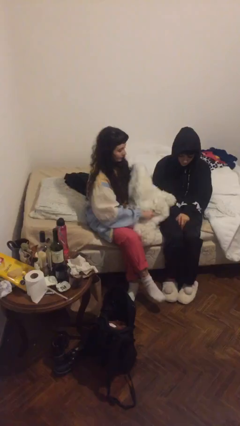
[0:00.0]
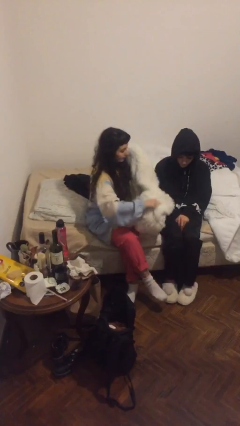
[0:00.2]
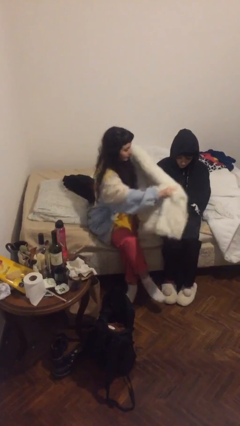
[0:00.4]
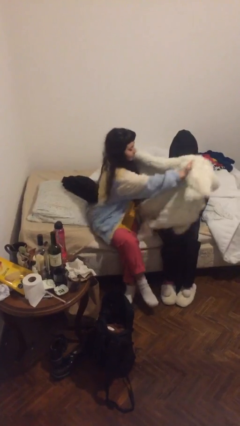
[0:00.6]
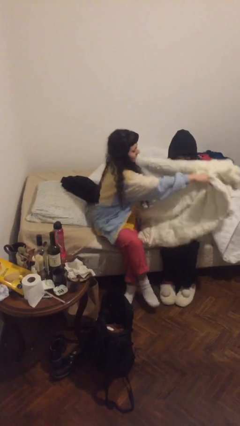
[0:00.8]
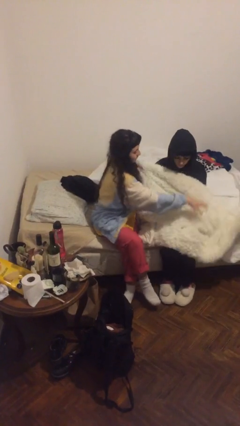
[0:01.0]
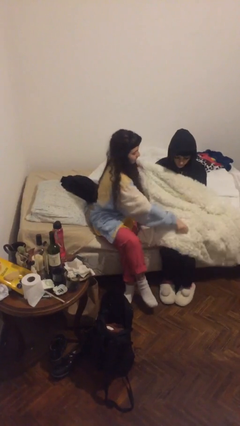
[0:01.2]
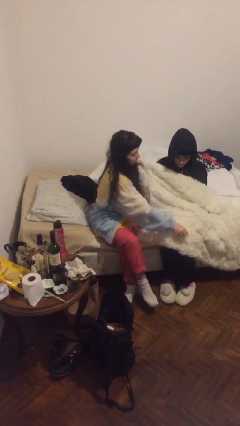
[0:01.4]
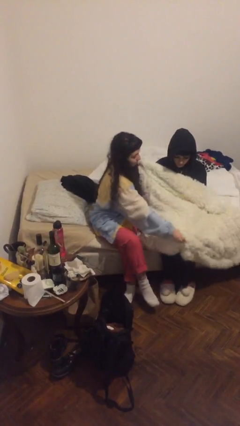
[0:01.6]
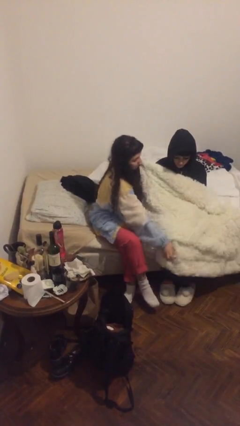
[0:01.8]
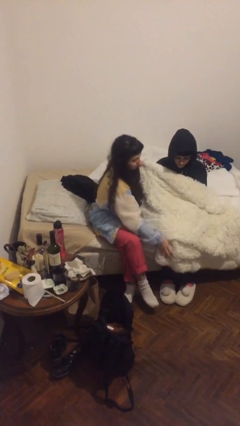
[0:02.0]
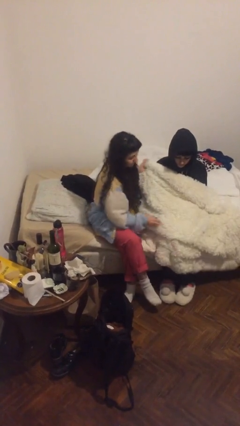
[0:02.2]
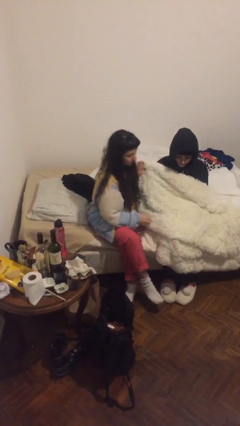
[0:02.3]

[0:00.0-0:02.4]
person covers friend with blanket

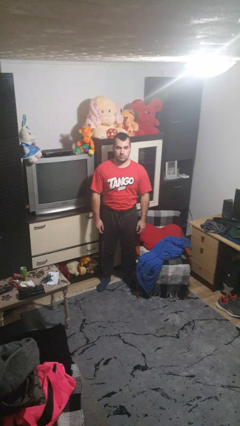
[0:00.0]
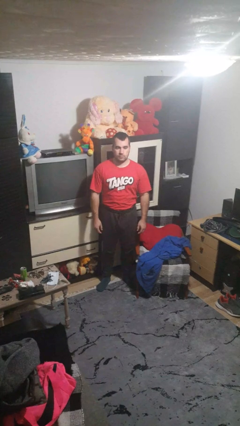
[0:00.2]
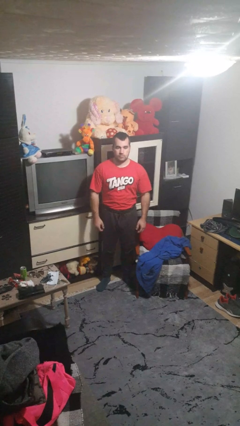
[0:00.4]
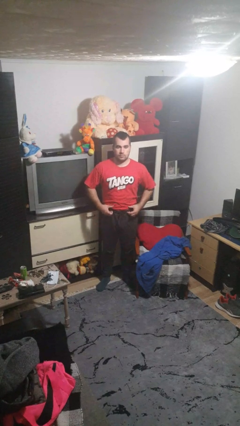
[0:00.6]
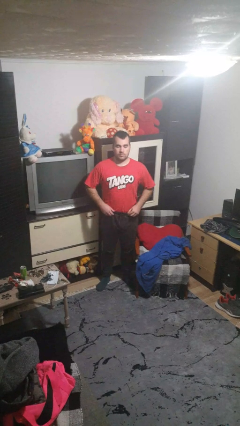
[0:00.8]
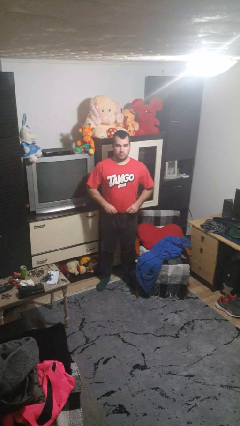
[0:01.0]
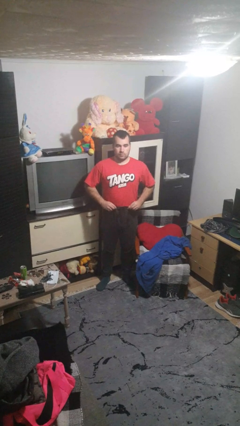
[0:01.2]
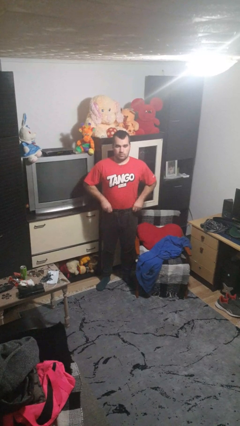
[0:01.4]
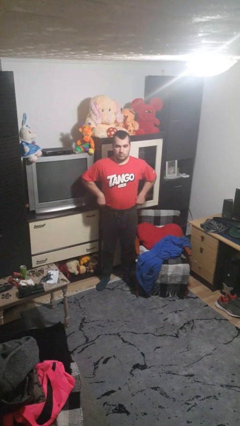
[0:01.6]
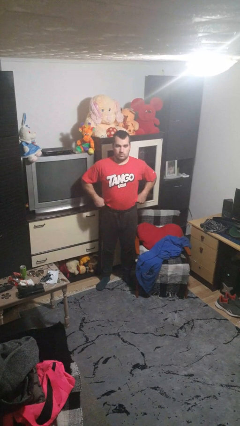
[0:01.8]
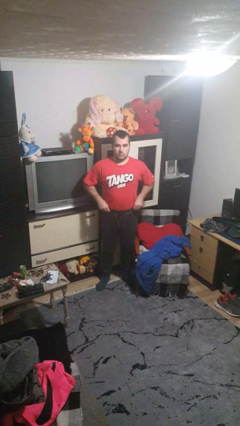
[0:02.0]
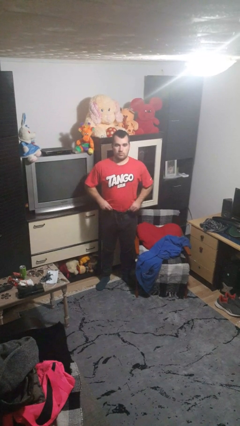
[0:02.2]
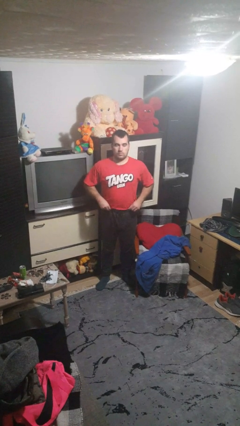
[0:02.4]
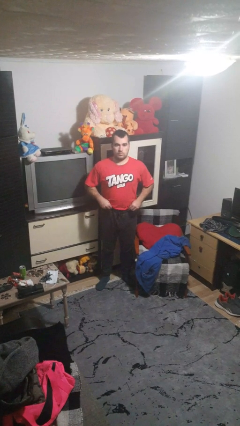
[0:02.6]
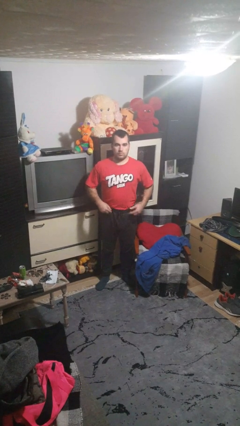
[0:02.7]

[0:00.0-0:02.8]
person hikes up pants

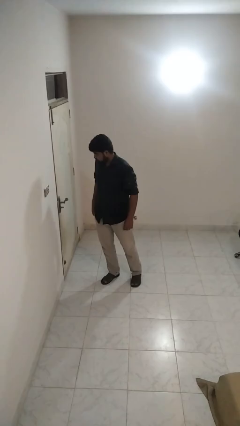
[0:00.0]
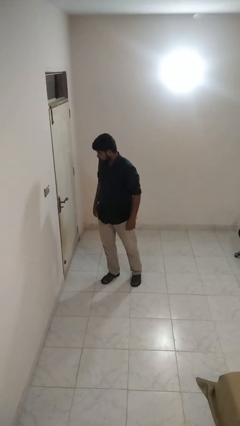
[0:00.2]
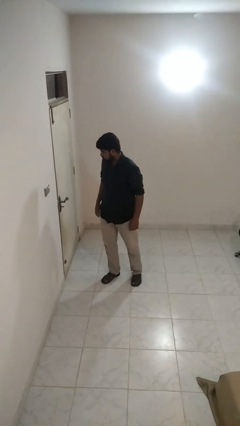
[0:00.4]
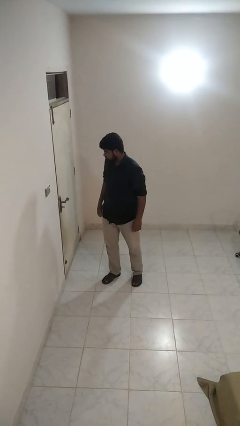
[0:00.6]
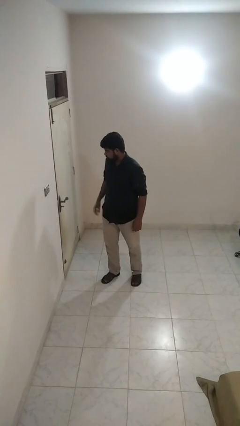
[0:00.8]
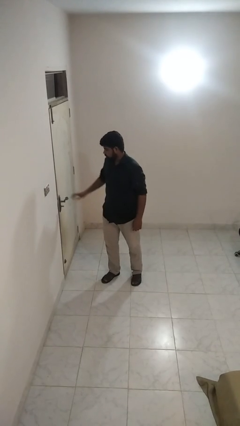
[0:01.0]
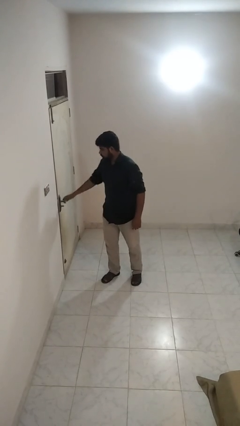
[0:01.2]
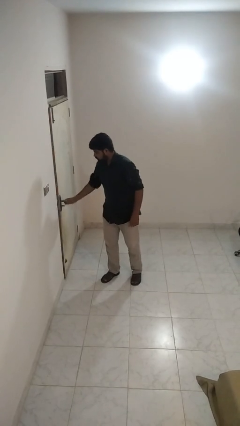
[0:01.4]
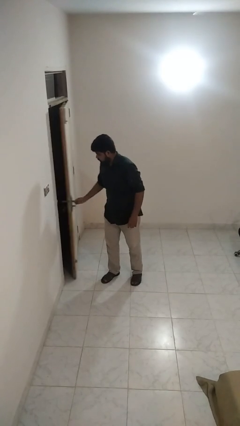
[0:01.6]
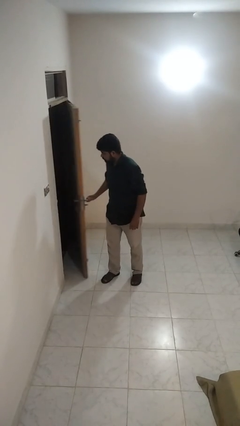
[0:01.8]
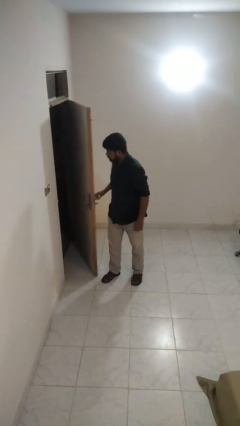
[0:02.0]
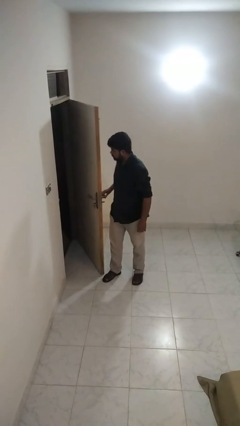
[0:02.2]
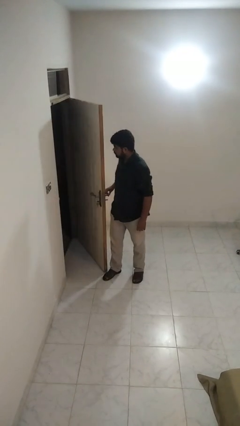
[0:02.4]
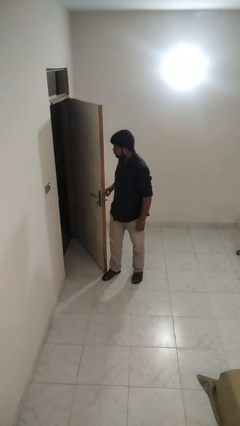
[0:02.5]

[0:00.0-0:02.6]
person opens facility door

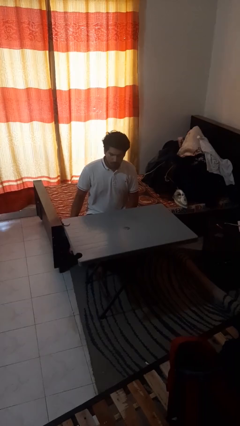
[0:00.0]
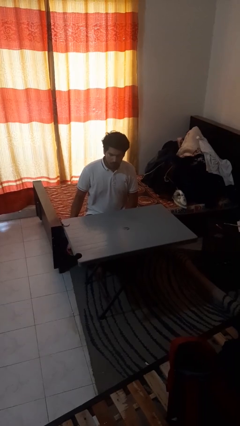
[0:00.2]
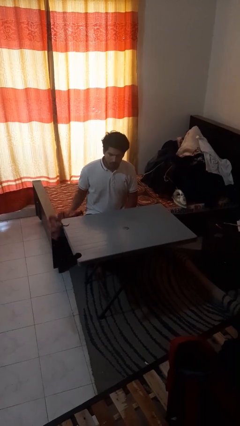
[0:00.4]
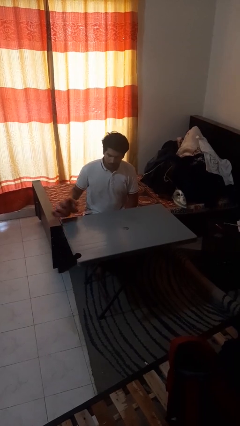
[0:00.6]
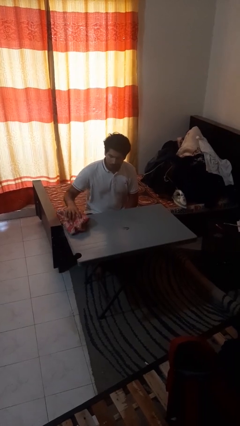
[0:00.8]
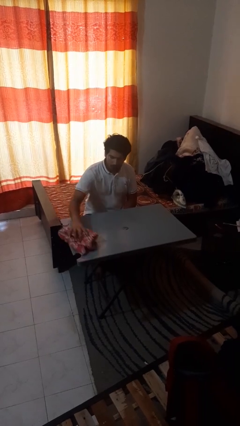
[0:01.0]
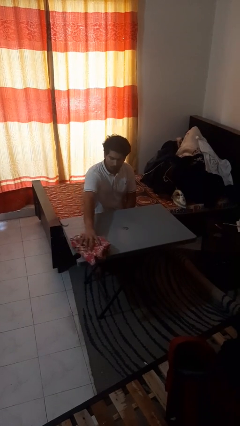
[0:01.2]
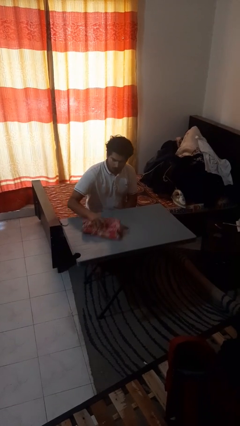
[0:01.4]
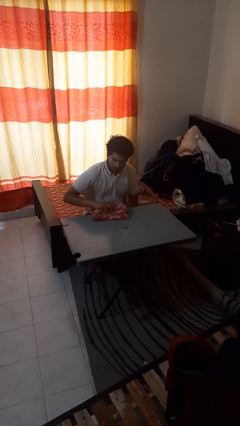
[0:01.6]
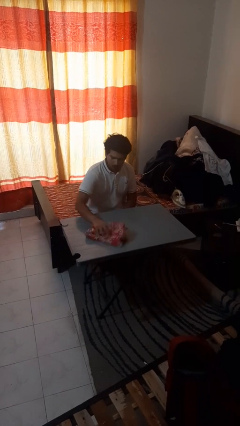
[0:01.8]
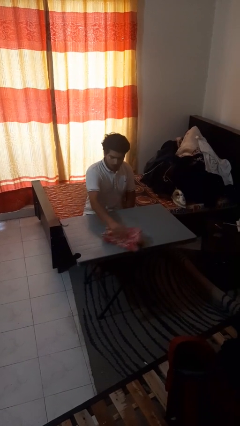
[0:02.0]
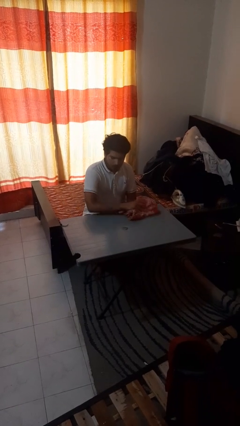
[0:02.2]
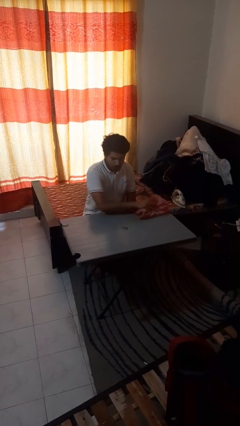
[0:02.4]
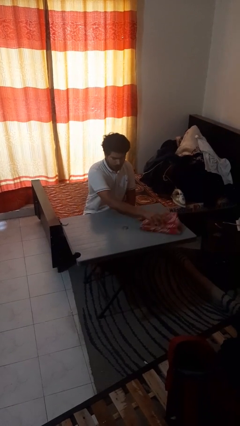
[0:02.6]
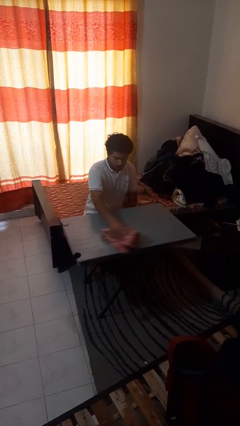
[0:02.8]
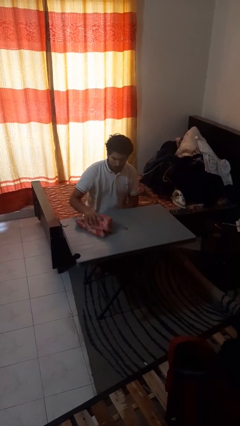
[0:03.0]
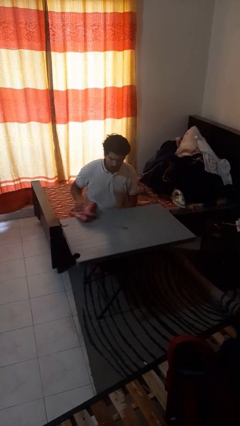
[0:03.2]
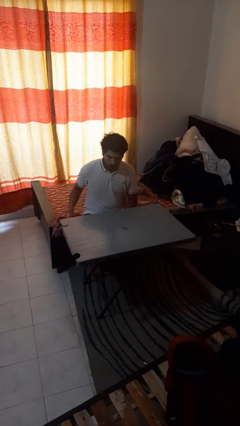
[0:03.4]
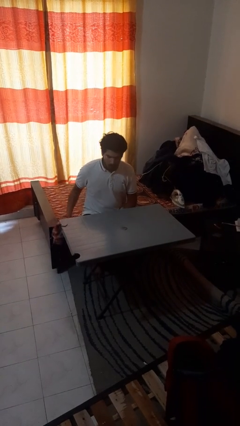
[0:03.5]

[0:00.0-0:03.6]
person cleans table with rag

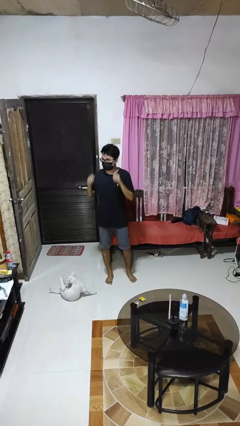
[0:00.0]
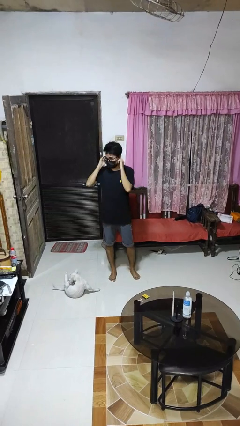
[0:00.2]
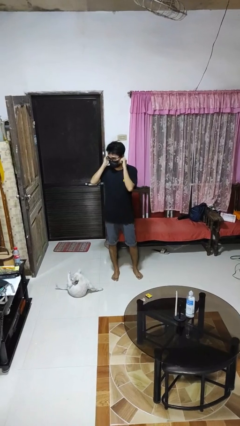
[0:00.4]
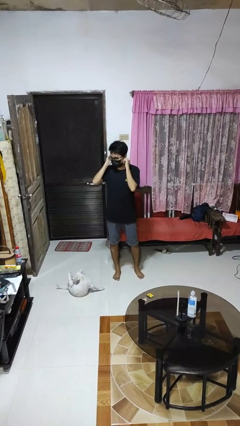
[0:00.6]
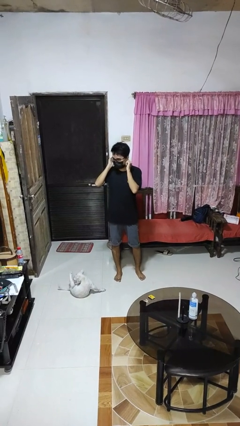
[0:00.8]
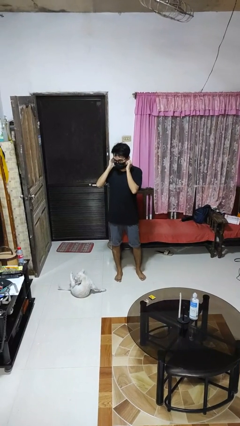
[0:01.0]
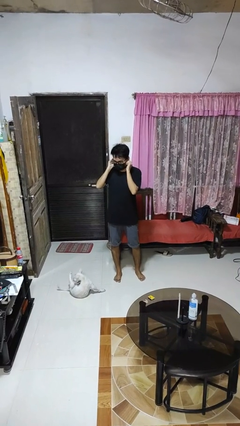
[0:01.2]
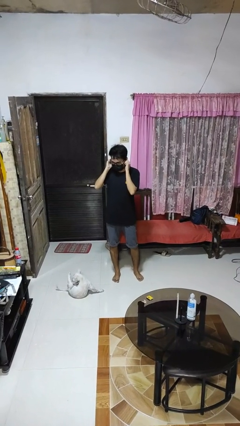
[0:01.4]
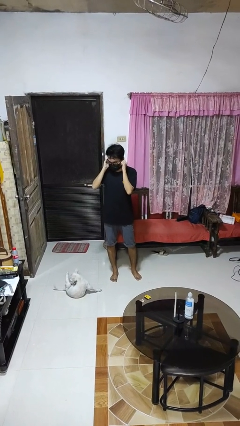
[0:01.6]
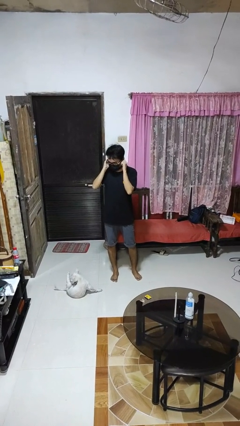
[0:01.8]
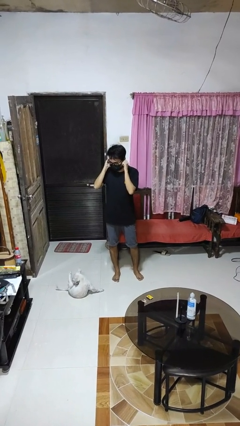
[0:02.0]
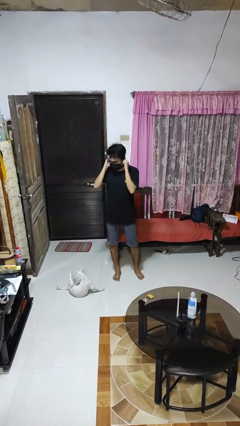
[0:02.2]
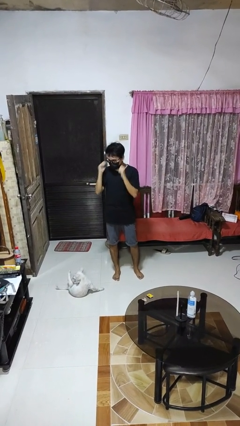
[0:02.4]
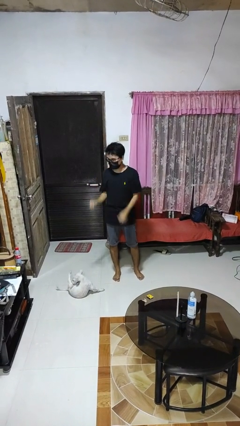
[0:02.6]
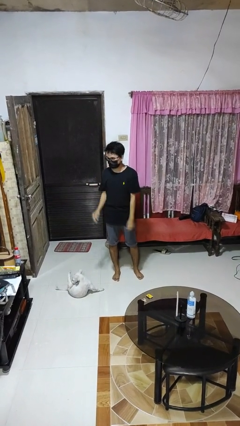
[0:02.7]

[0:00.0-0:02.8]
person touches earlobe

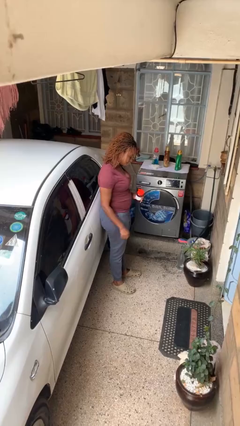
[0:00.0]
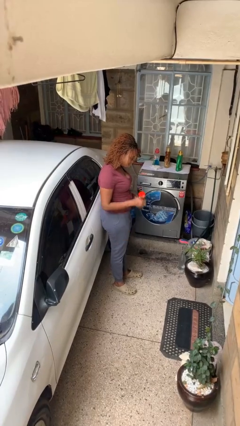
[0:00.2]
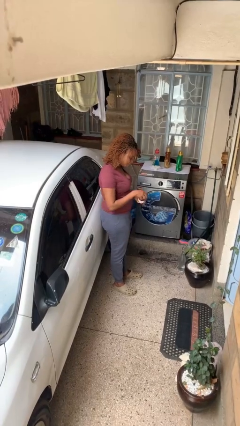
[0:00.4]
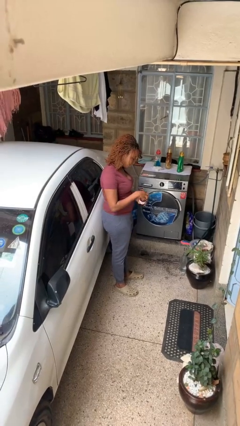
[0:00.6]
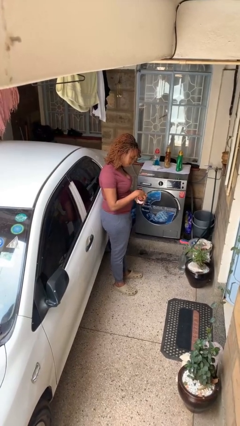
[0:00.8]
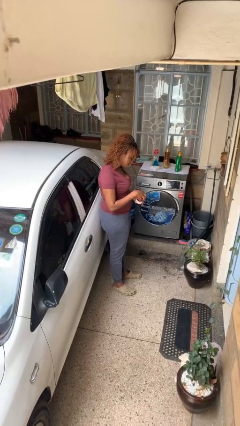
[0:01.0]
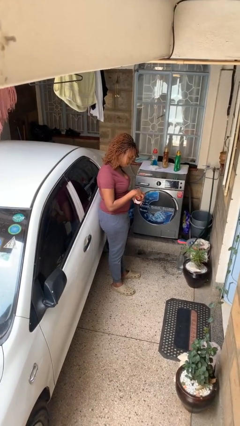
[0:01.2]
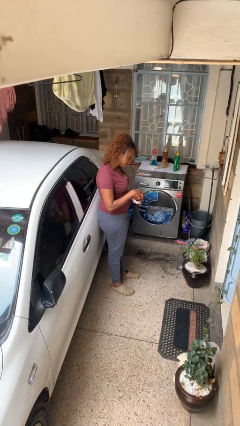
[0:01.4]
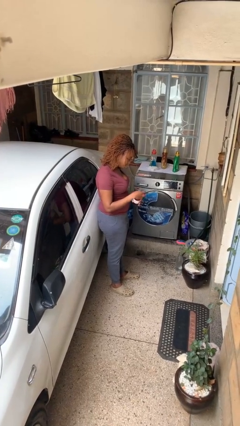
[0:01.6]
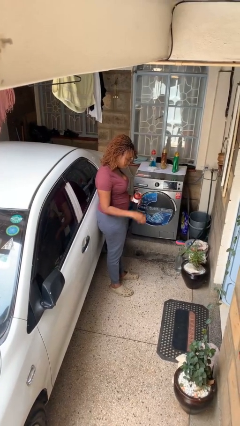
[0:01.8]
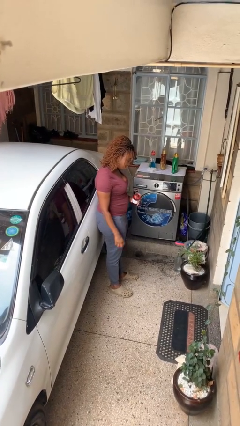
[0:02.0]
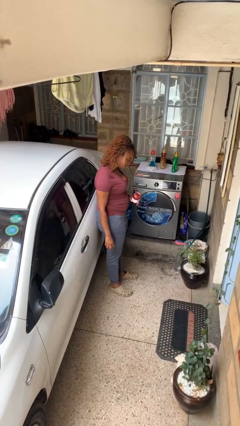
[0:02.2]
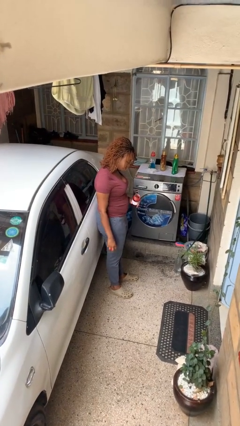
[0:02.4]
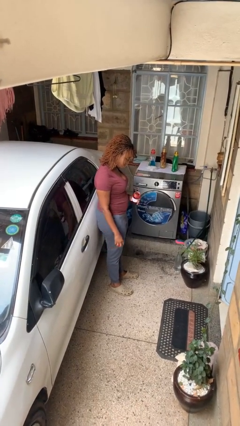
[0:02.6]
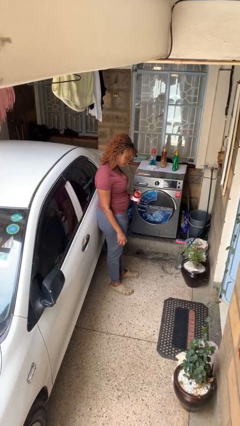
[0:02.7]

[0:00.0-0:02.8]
person opens jar

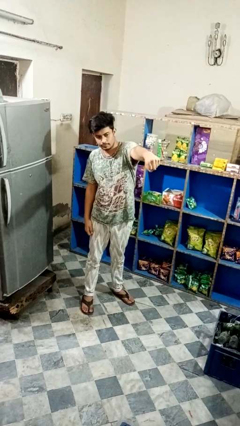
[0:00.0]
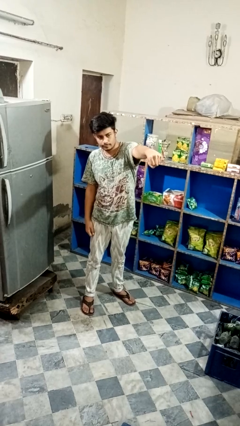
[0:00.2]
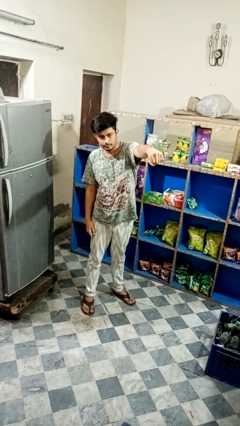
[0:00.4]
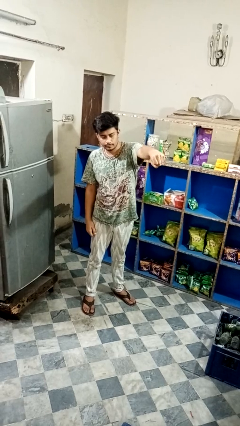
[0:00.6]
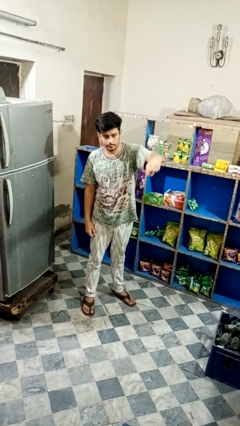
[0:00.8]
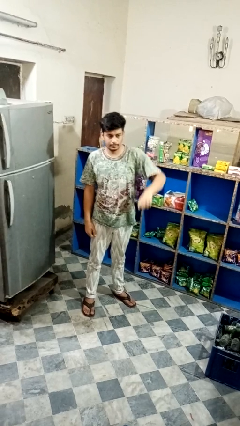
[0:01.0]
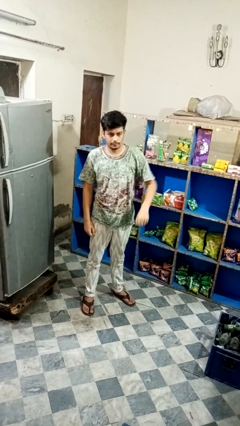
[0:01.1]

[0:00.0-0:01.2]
person punches
